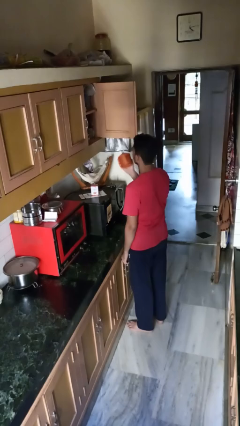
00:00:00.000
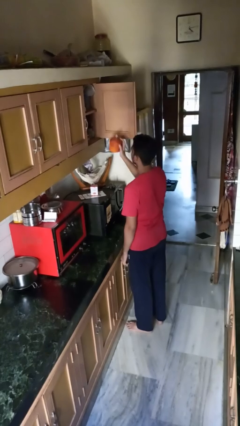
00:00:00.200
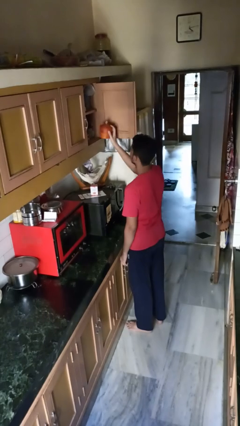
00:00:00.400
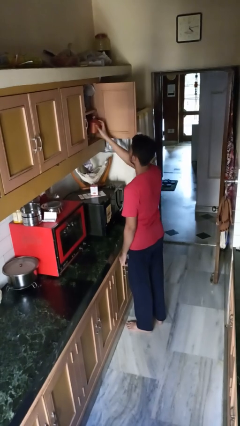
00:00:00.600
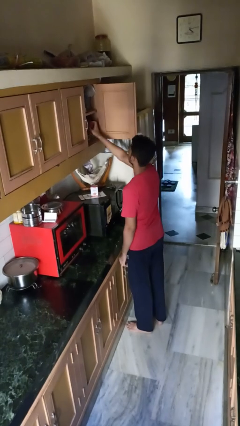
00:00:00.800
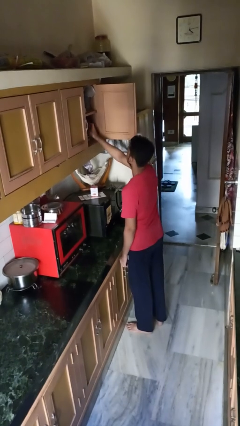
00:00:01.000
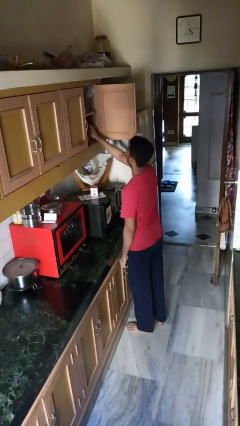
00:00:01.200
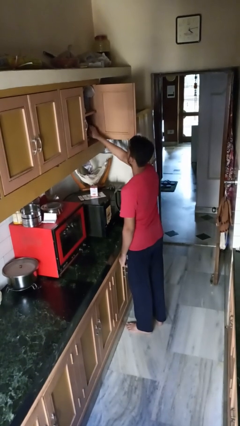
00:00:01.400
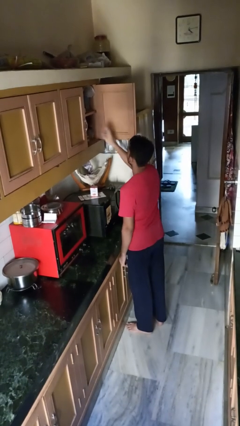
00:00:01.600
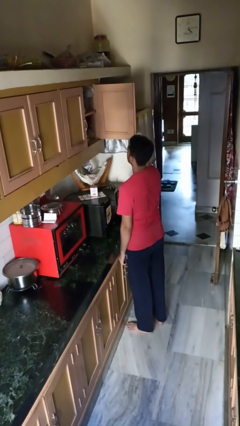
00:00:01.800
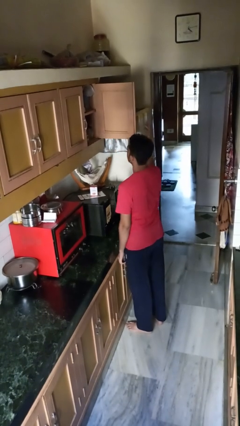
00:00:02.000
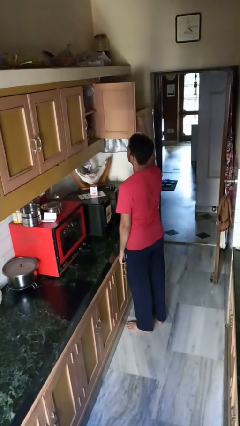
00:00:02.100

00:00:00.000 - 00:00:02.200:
person puts object in cabinet

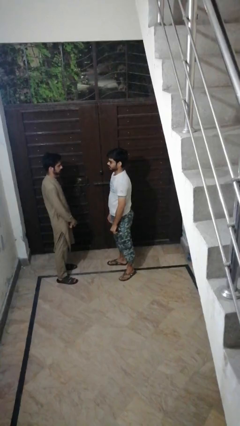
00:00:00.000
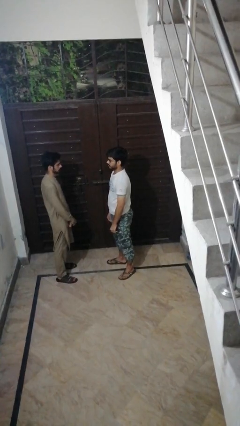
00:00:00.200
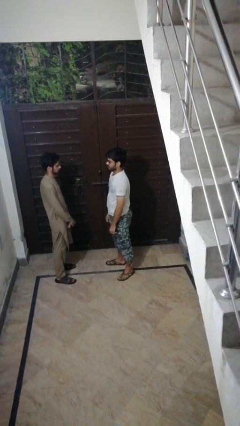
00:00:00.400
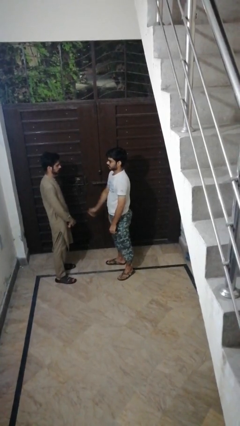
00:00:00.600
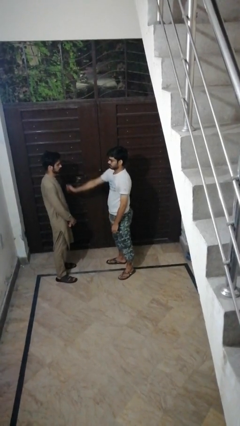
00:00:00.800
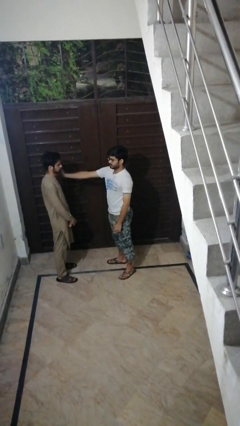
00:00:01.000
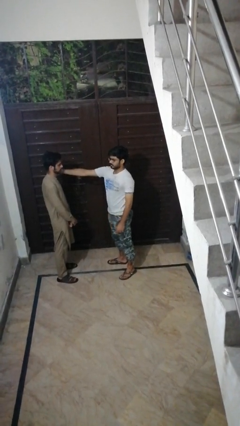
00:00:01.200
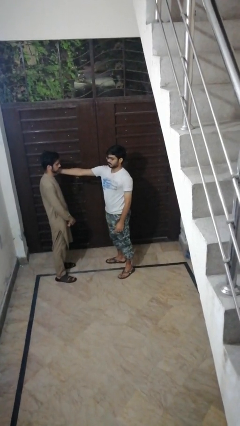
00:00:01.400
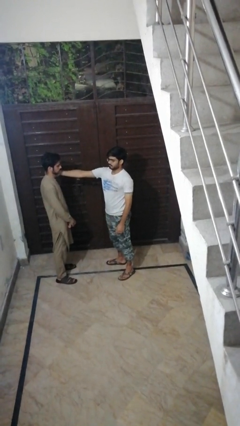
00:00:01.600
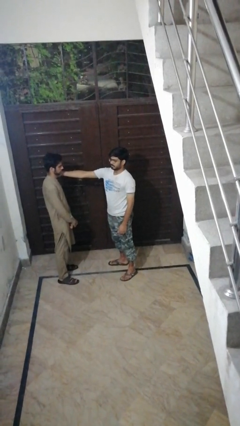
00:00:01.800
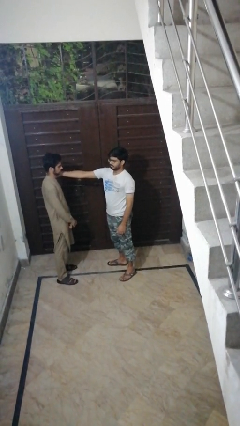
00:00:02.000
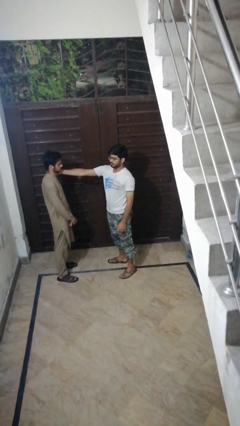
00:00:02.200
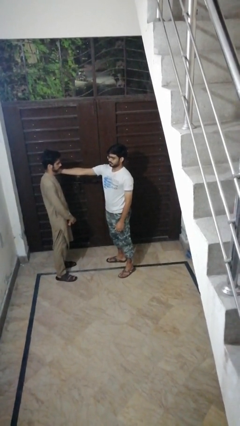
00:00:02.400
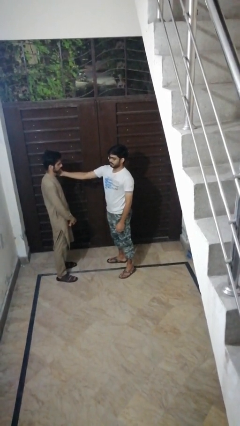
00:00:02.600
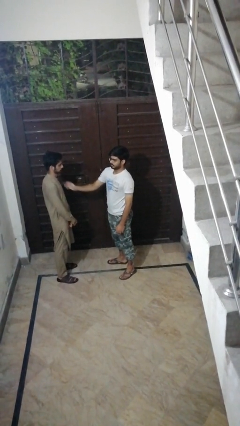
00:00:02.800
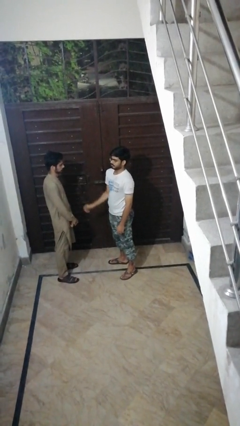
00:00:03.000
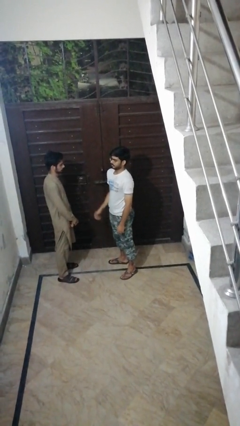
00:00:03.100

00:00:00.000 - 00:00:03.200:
person touches face of person

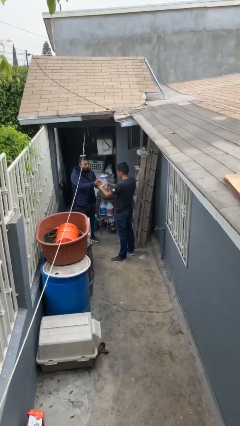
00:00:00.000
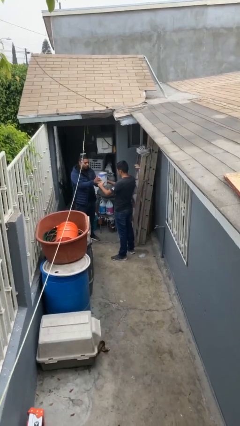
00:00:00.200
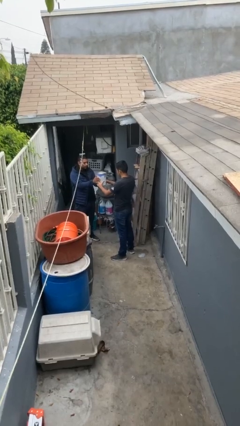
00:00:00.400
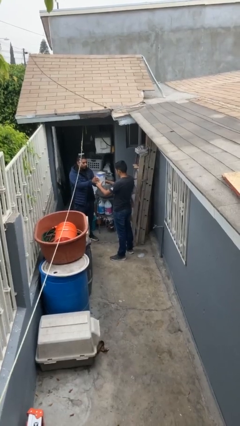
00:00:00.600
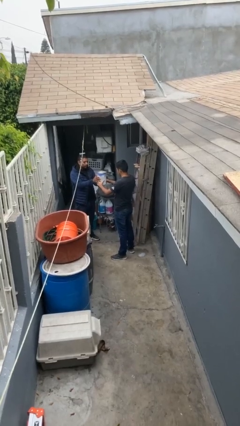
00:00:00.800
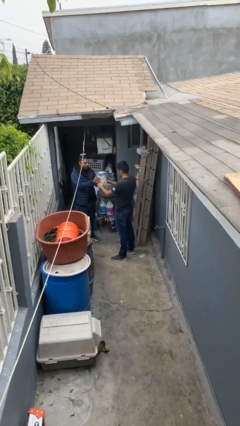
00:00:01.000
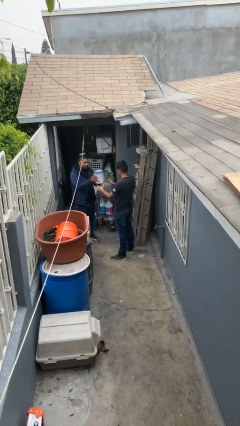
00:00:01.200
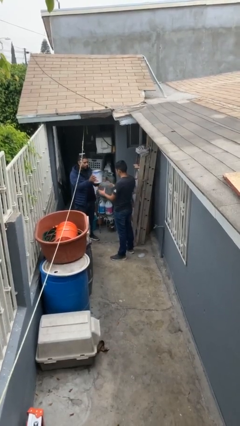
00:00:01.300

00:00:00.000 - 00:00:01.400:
person transfers object to person

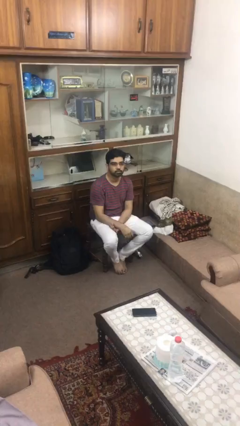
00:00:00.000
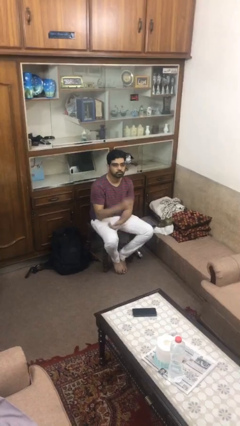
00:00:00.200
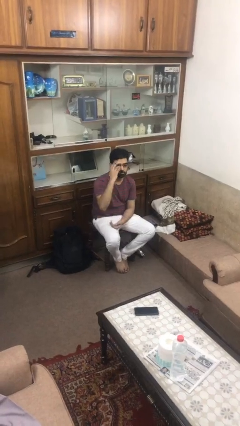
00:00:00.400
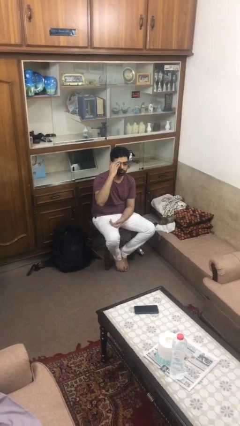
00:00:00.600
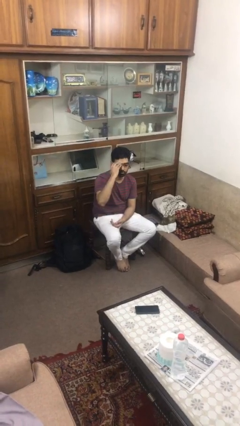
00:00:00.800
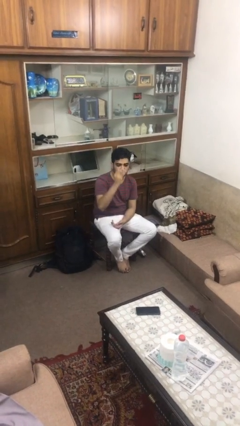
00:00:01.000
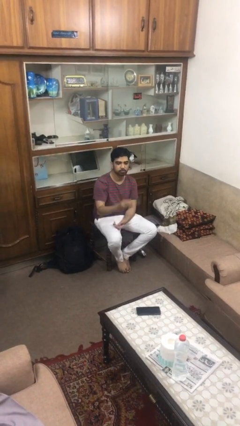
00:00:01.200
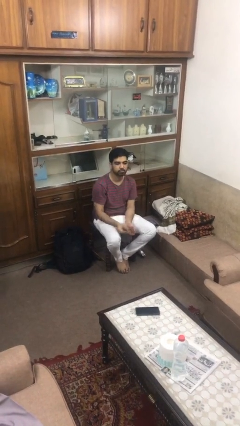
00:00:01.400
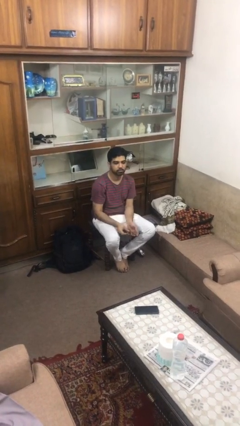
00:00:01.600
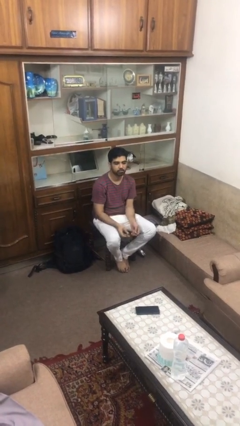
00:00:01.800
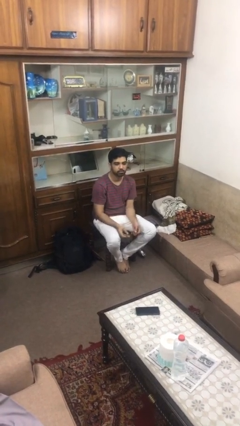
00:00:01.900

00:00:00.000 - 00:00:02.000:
person takes off glasses

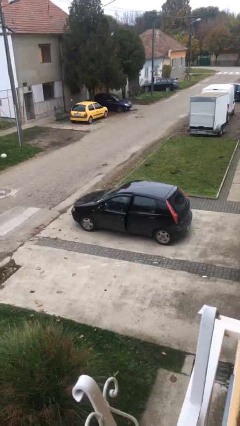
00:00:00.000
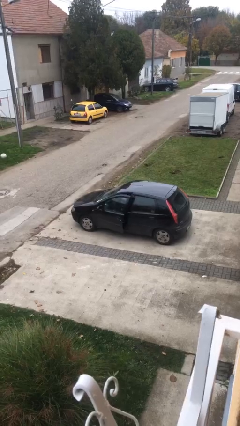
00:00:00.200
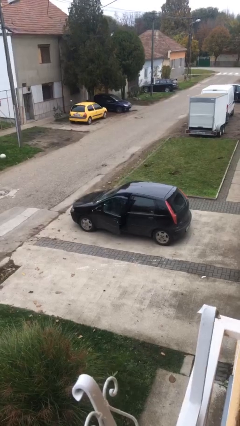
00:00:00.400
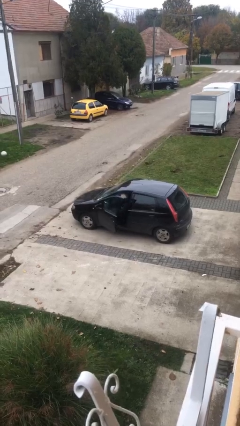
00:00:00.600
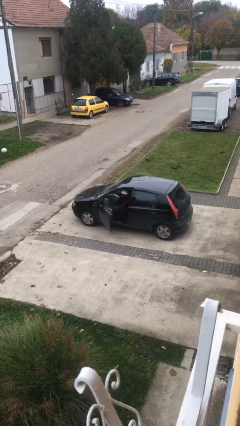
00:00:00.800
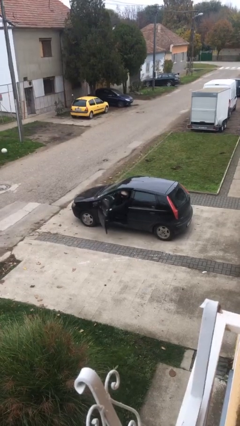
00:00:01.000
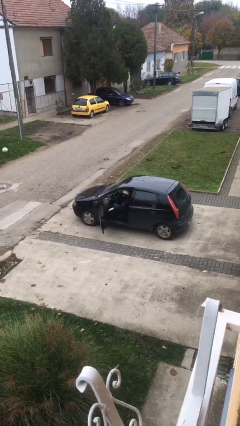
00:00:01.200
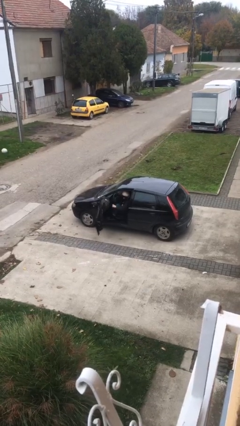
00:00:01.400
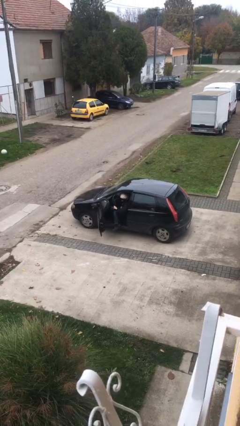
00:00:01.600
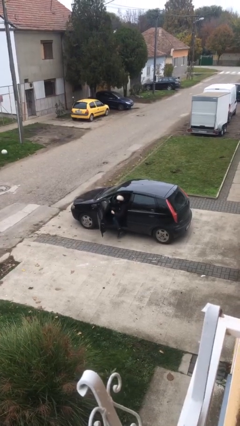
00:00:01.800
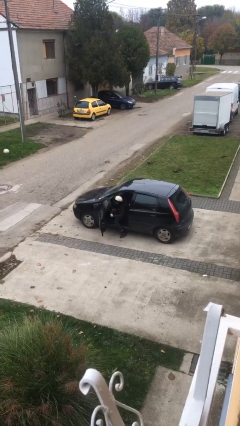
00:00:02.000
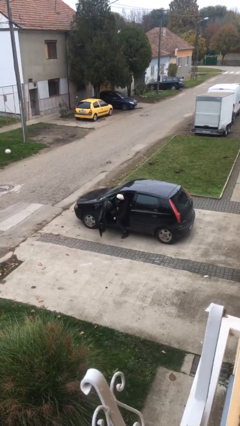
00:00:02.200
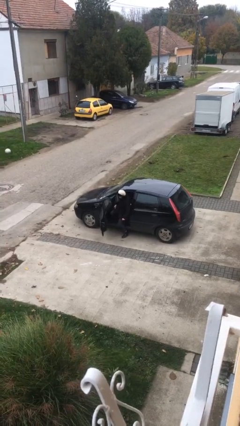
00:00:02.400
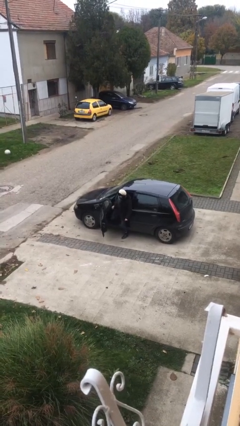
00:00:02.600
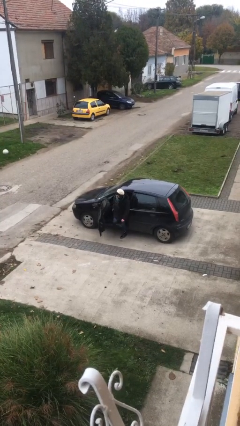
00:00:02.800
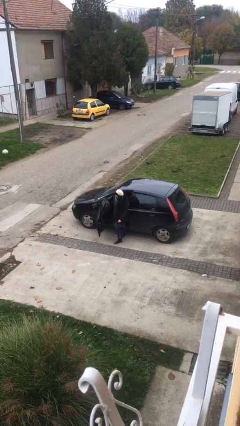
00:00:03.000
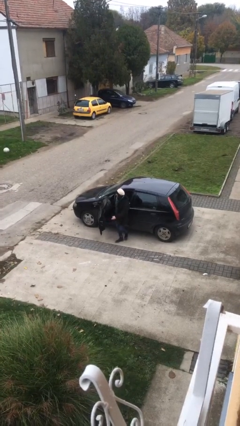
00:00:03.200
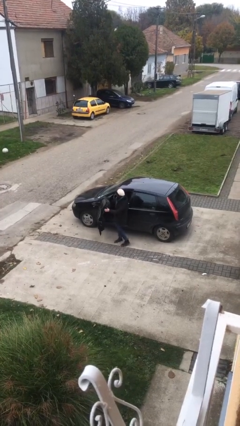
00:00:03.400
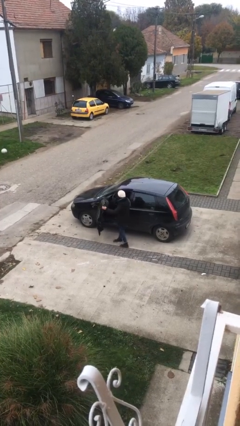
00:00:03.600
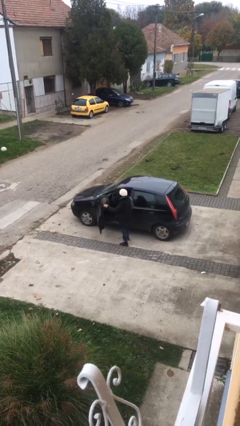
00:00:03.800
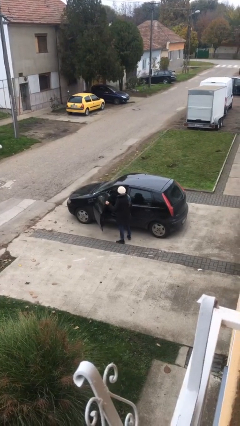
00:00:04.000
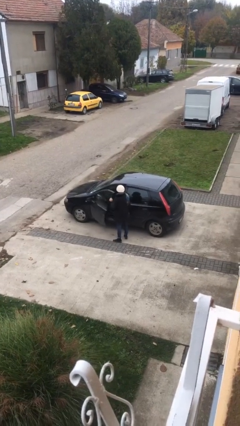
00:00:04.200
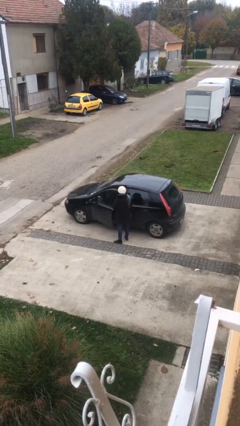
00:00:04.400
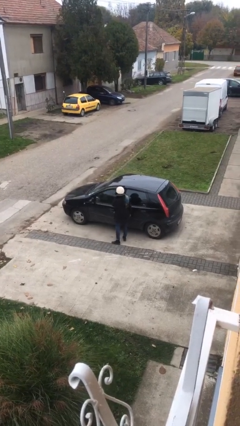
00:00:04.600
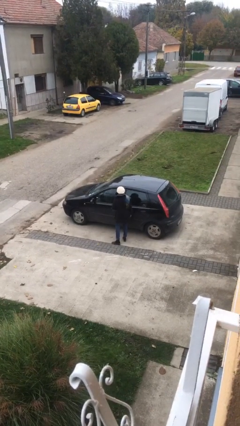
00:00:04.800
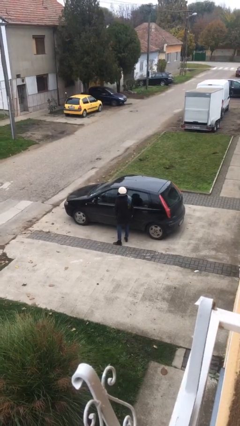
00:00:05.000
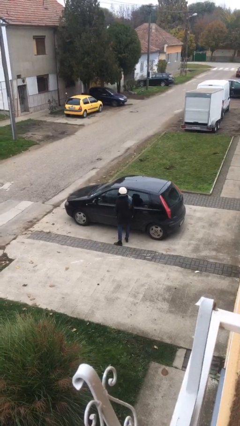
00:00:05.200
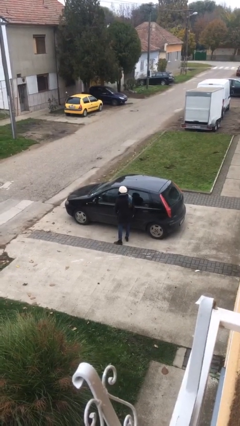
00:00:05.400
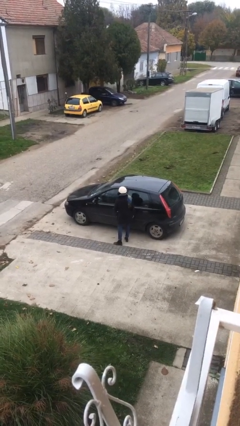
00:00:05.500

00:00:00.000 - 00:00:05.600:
person exits car

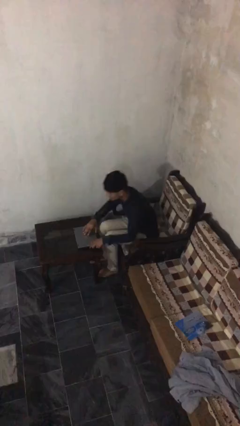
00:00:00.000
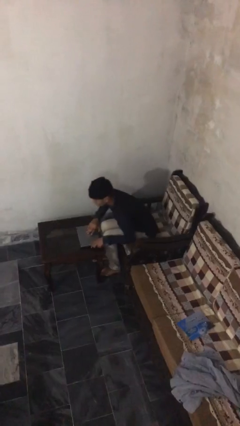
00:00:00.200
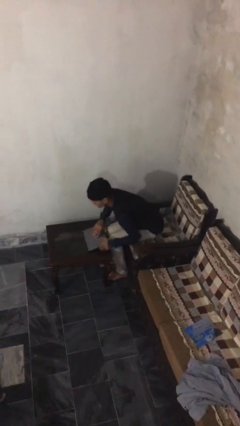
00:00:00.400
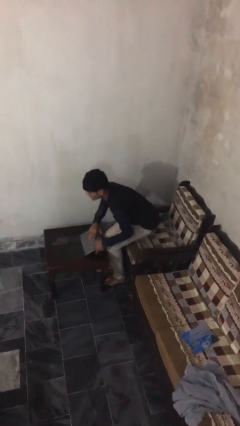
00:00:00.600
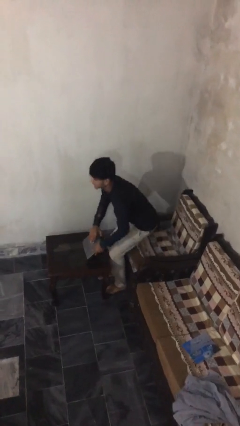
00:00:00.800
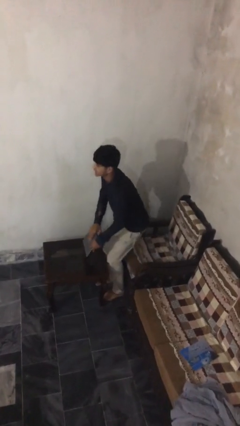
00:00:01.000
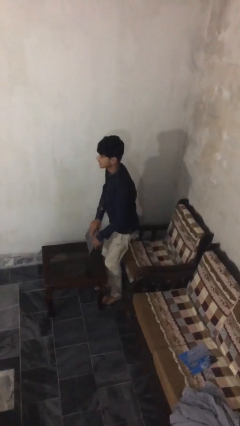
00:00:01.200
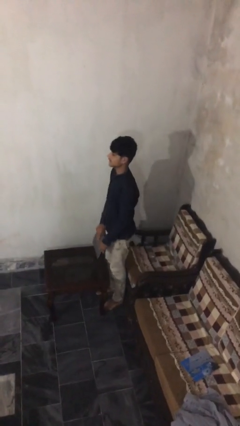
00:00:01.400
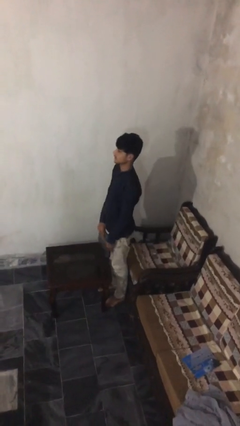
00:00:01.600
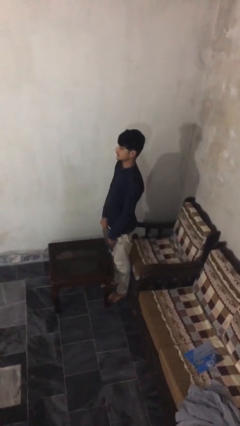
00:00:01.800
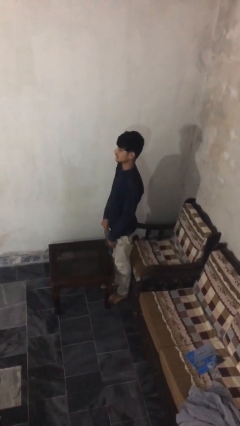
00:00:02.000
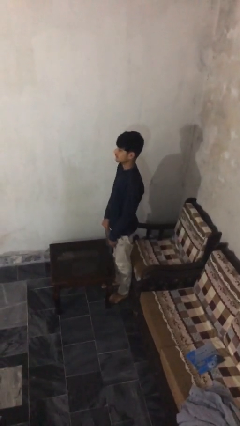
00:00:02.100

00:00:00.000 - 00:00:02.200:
person stands up

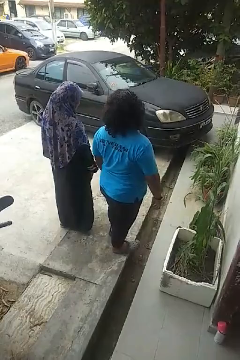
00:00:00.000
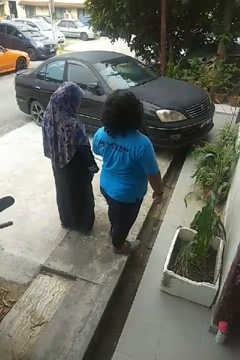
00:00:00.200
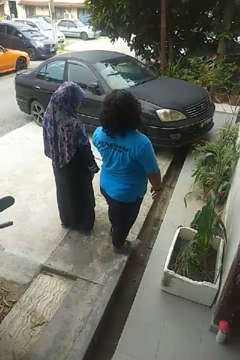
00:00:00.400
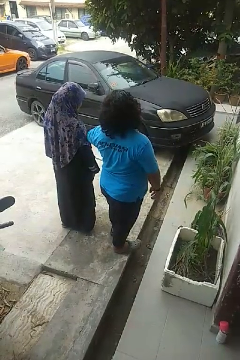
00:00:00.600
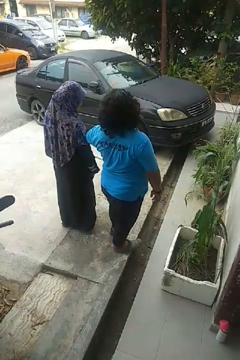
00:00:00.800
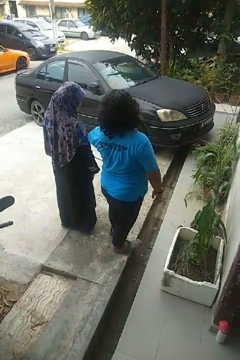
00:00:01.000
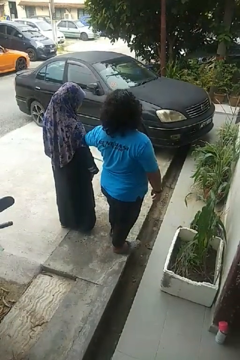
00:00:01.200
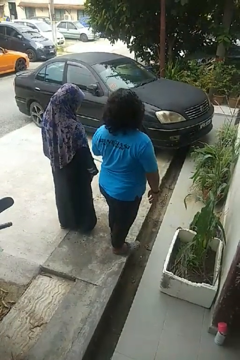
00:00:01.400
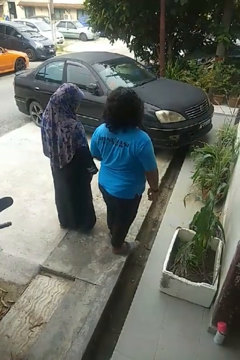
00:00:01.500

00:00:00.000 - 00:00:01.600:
person nudges person with elbow
